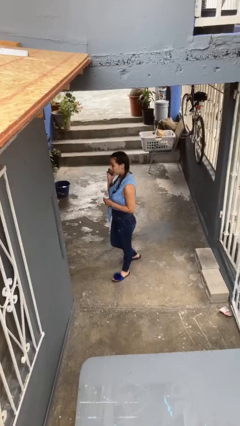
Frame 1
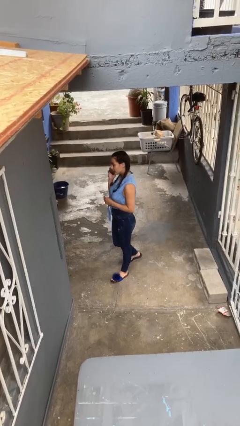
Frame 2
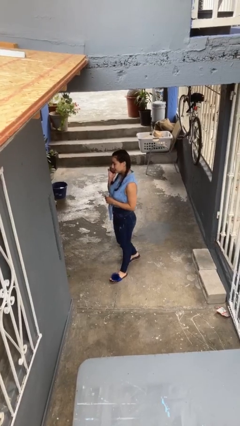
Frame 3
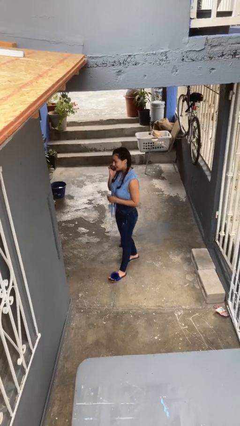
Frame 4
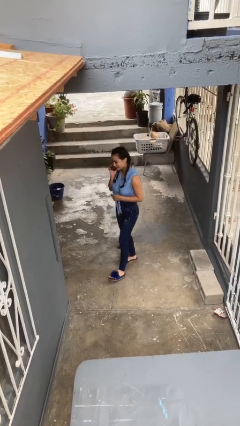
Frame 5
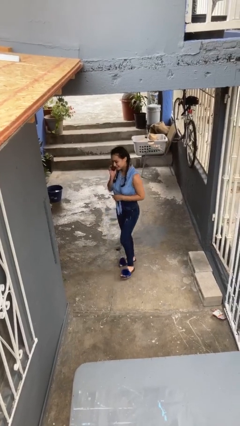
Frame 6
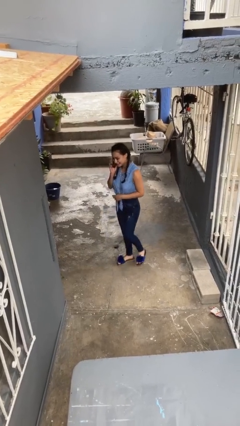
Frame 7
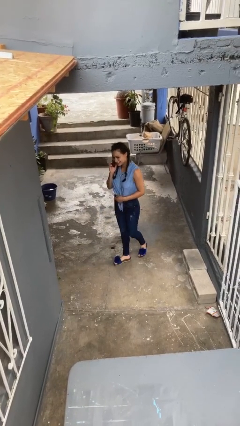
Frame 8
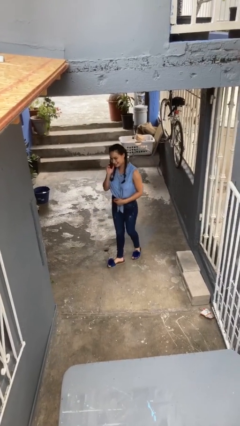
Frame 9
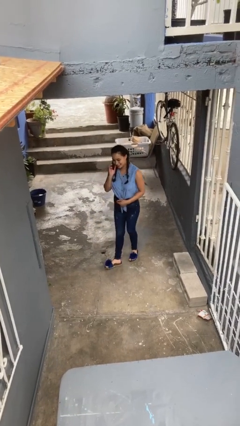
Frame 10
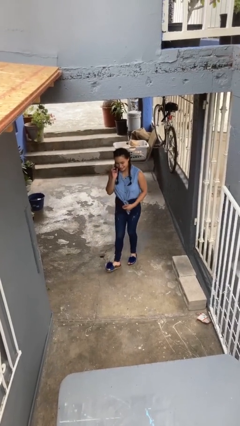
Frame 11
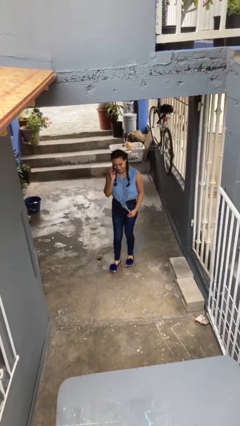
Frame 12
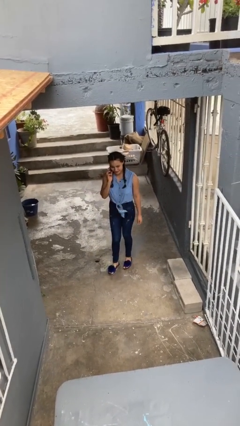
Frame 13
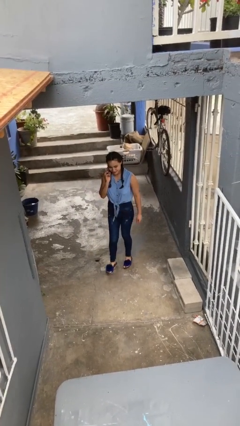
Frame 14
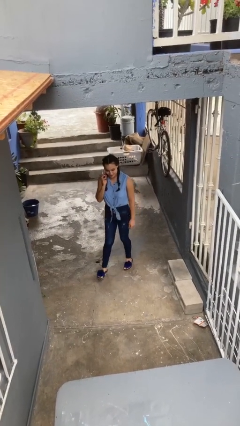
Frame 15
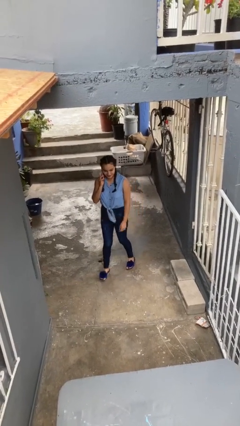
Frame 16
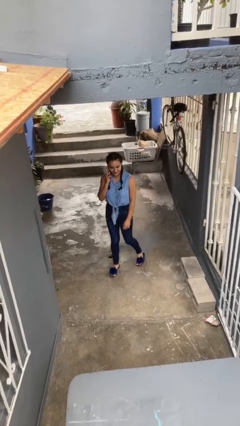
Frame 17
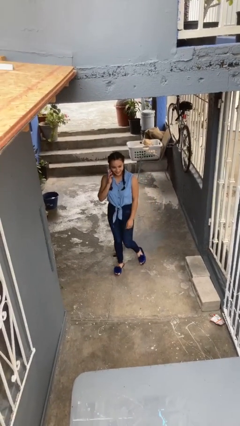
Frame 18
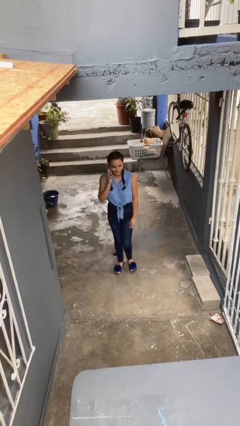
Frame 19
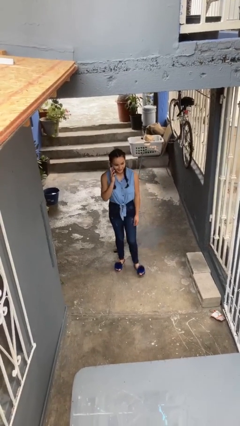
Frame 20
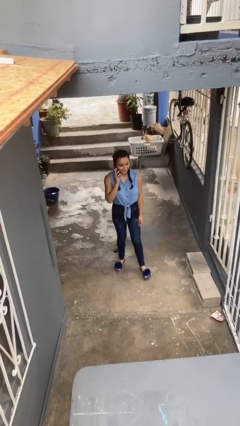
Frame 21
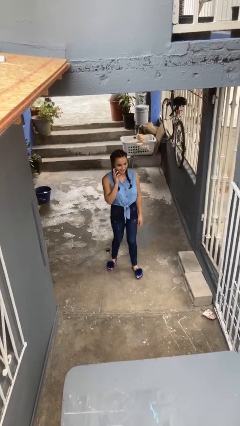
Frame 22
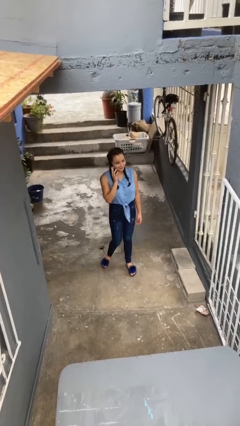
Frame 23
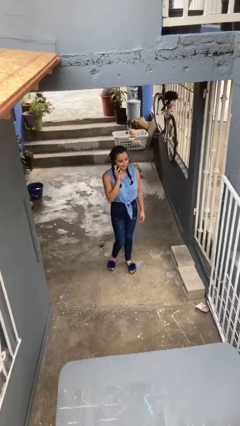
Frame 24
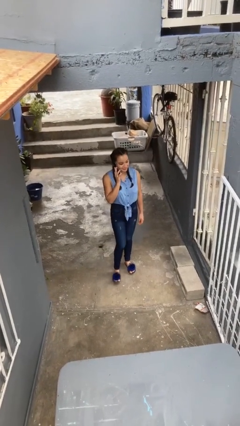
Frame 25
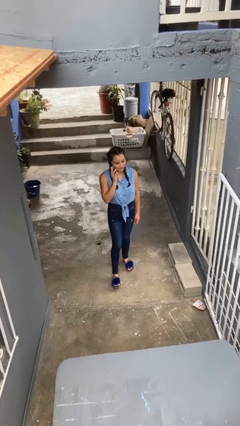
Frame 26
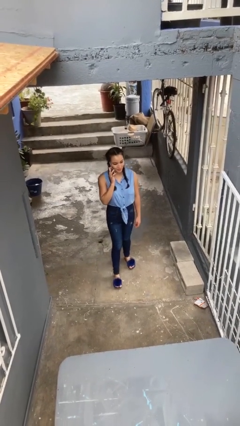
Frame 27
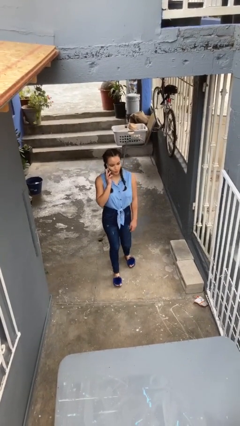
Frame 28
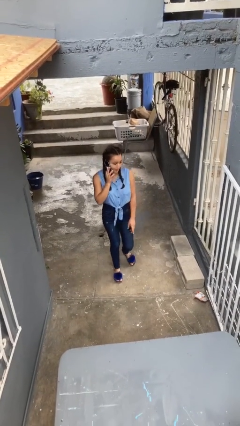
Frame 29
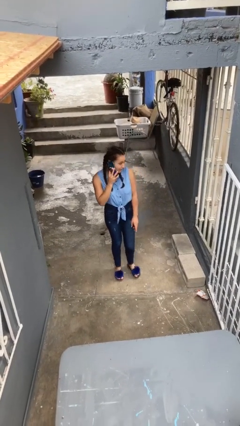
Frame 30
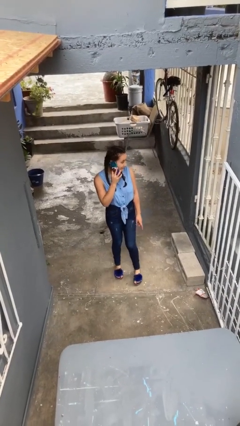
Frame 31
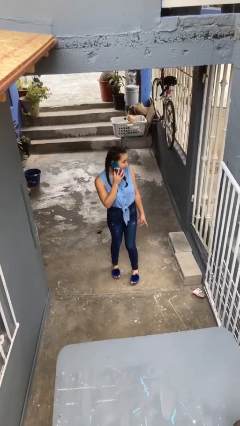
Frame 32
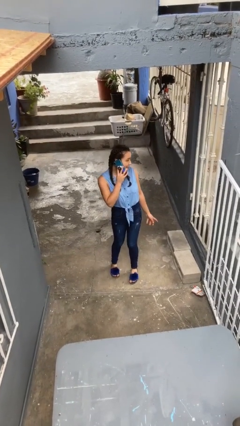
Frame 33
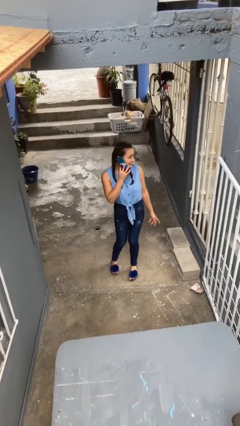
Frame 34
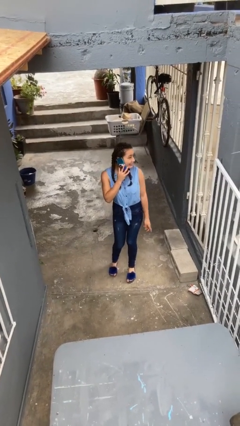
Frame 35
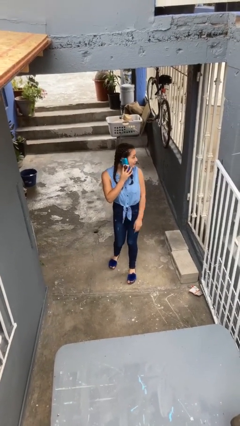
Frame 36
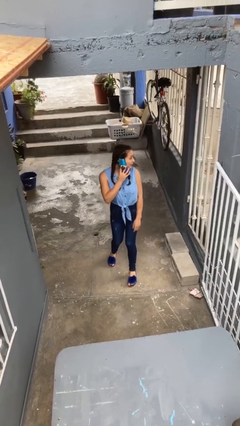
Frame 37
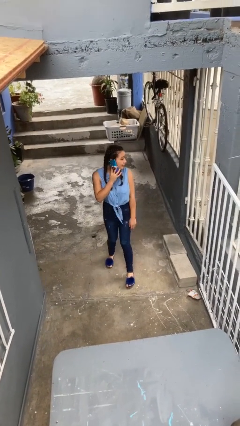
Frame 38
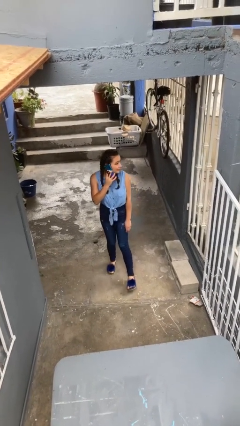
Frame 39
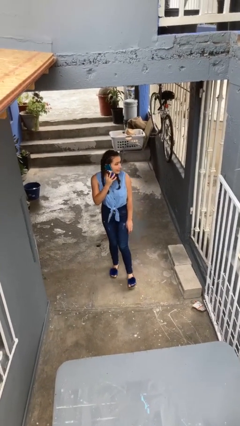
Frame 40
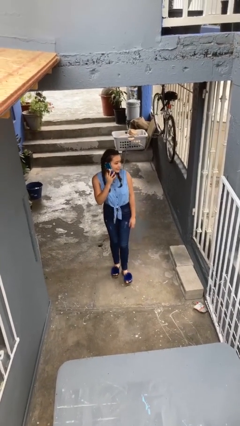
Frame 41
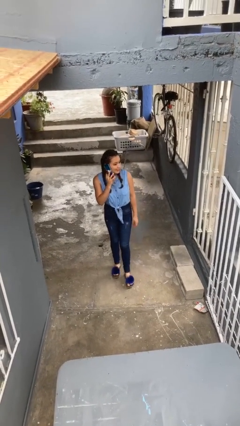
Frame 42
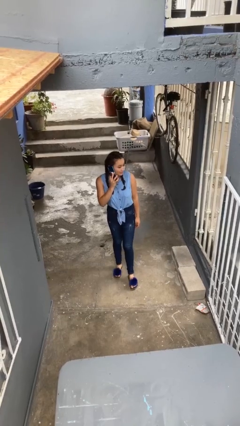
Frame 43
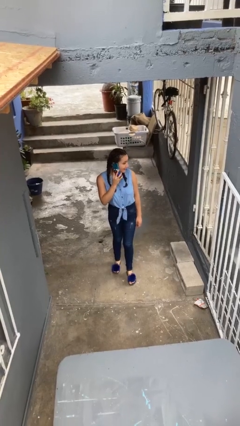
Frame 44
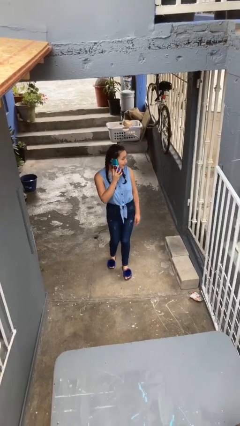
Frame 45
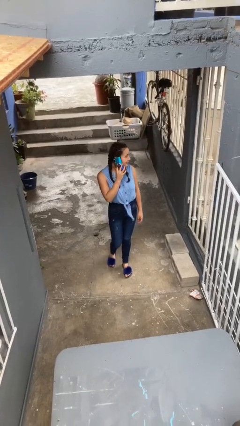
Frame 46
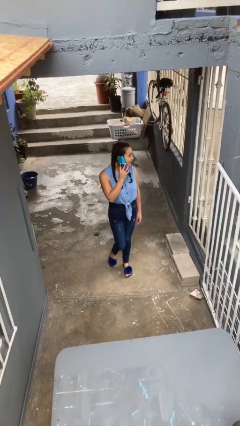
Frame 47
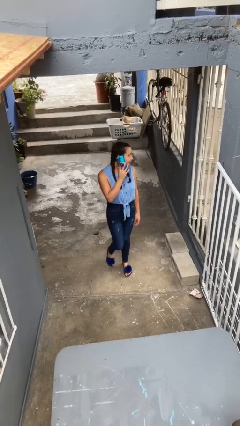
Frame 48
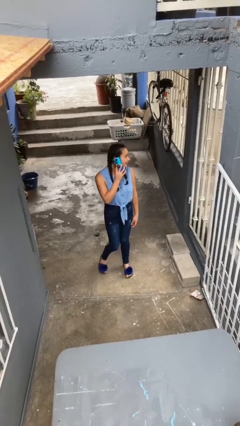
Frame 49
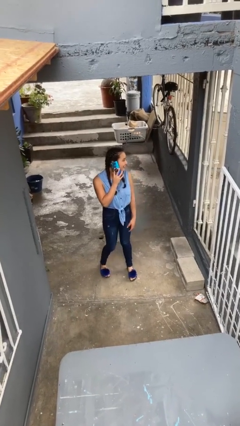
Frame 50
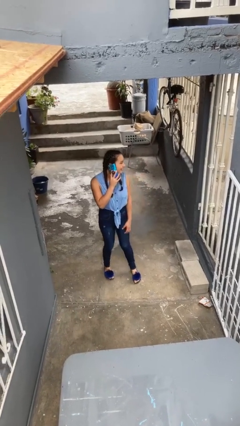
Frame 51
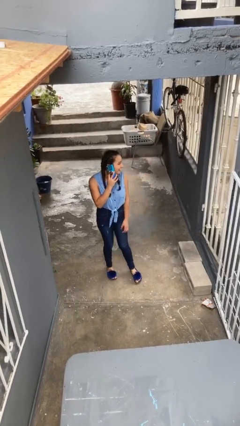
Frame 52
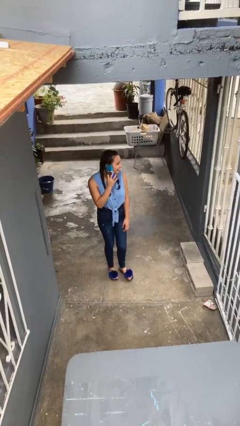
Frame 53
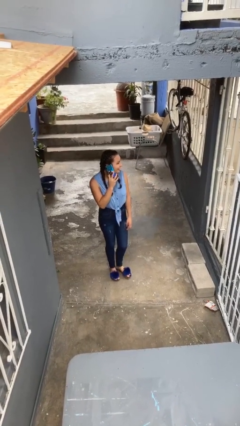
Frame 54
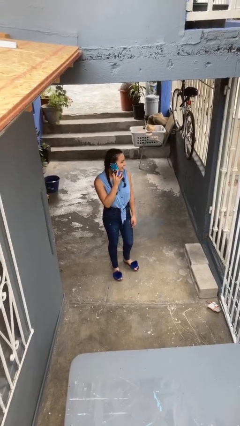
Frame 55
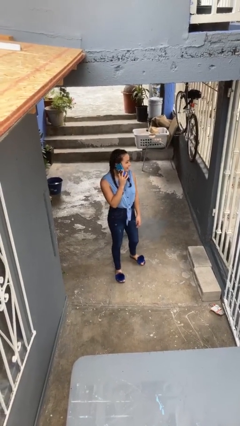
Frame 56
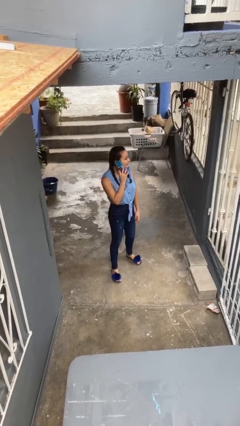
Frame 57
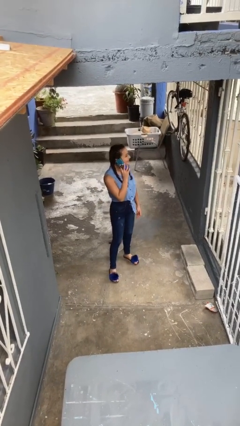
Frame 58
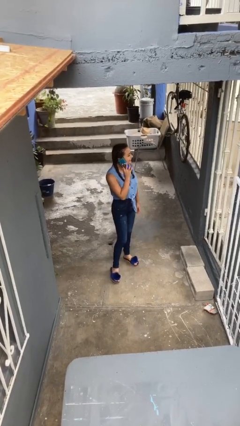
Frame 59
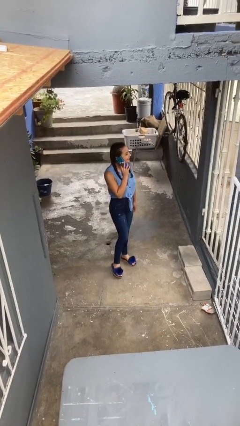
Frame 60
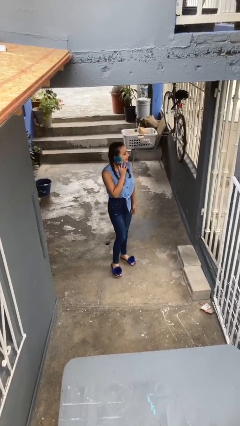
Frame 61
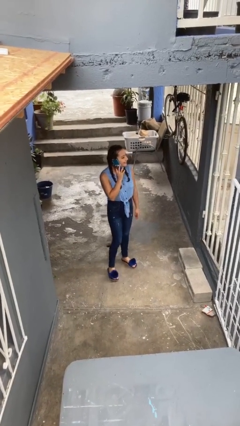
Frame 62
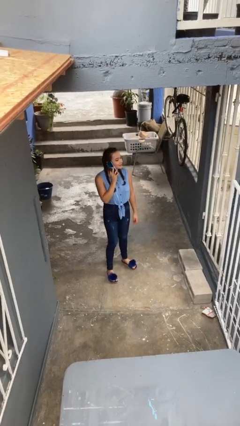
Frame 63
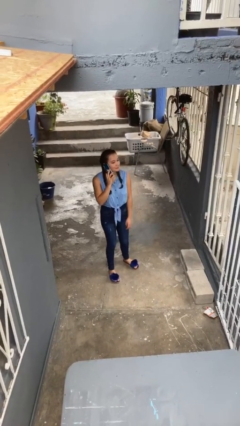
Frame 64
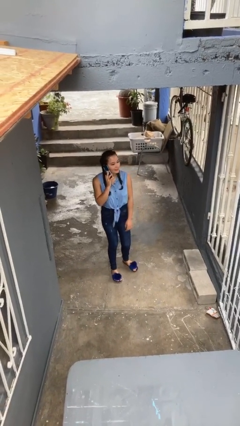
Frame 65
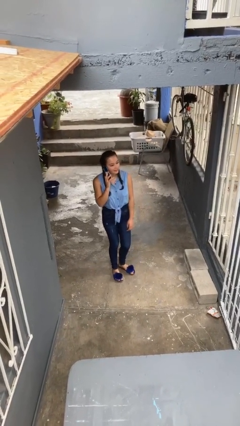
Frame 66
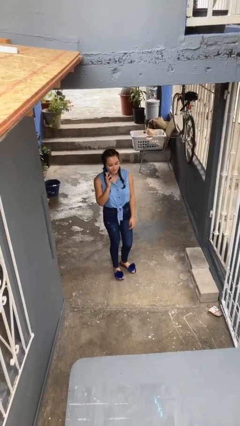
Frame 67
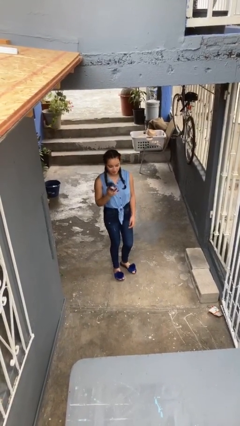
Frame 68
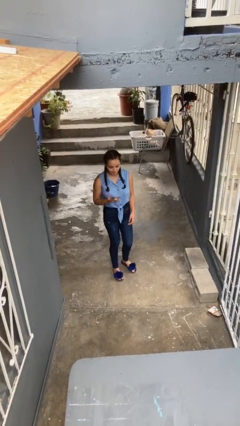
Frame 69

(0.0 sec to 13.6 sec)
person talks on phone

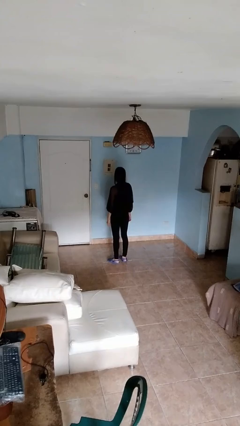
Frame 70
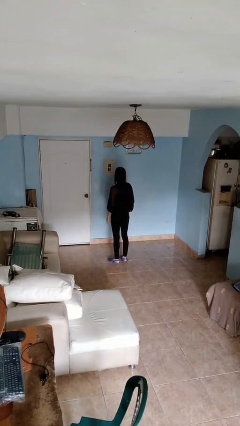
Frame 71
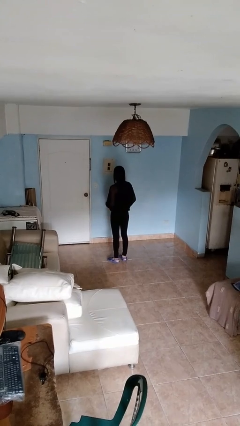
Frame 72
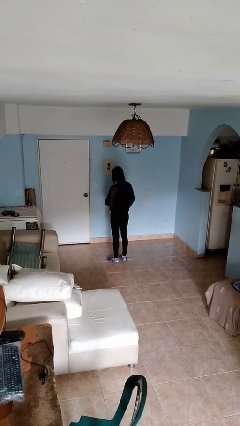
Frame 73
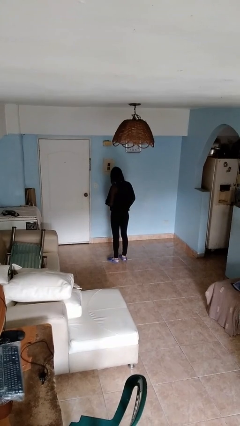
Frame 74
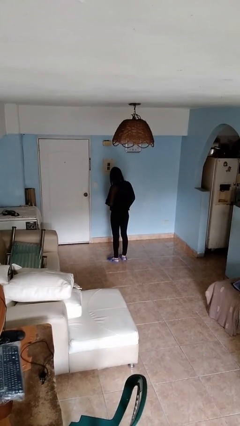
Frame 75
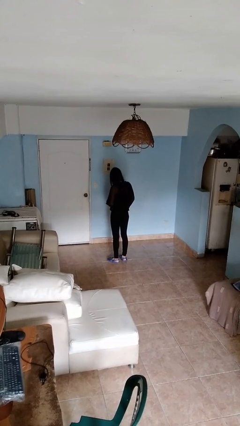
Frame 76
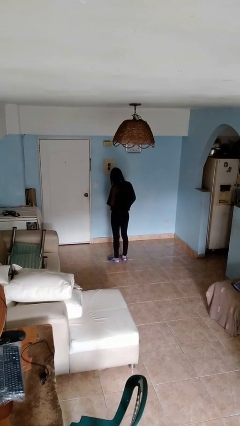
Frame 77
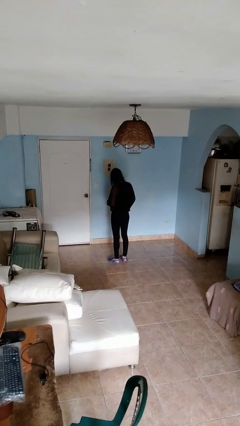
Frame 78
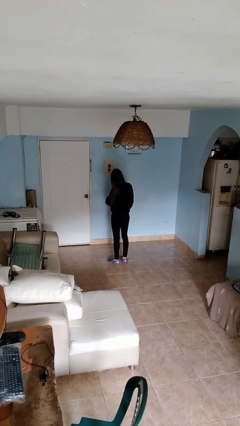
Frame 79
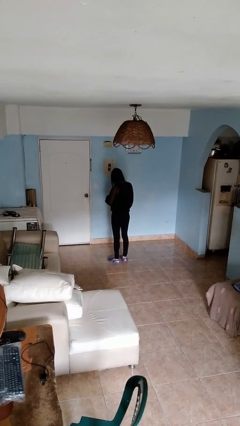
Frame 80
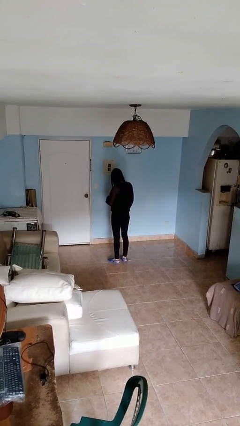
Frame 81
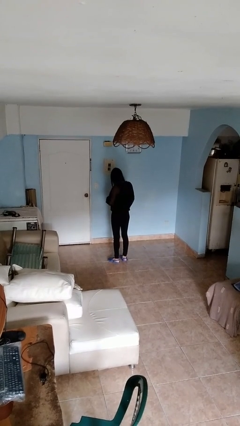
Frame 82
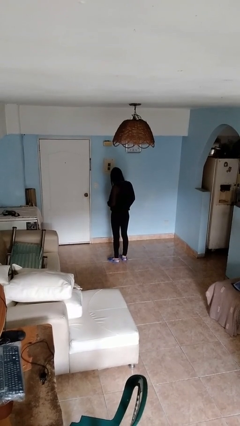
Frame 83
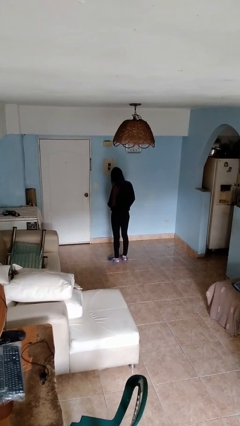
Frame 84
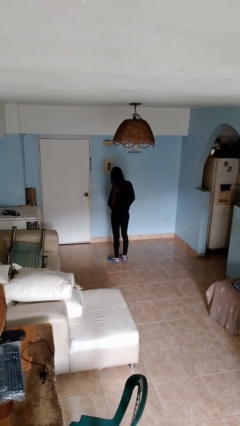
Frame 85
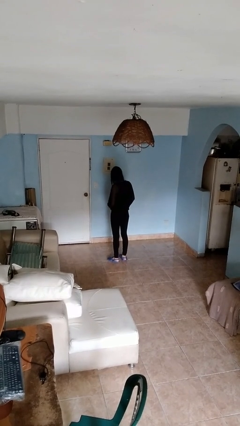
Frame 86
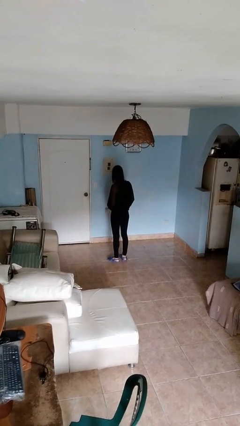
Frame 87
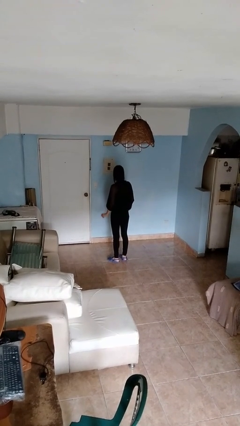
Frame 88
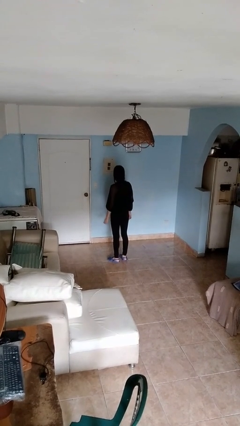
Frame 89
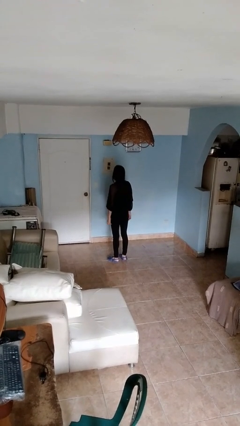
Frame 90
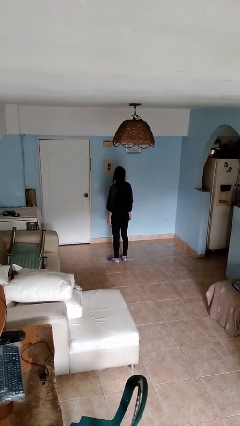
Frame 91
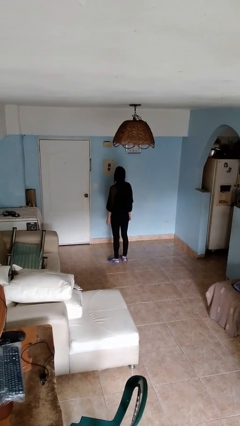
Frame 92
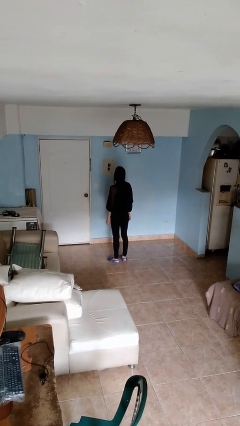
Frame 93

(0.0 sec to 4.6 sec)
person unbuttons shirt
